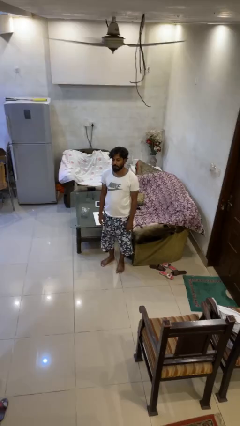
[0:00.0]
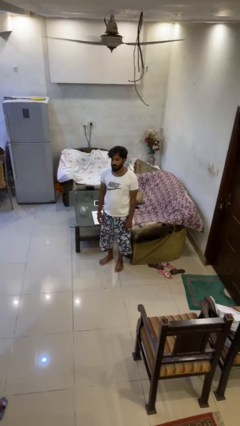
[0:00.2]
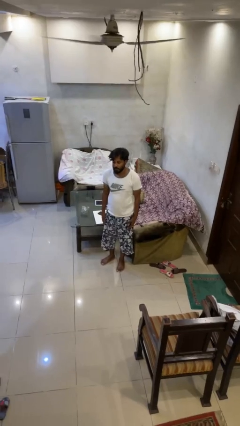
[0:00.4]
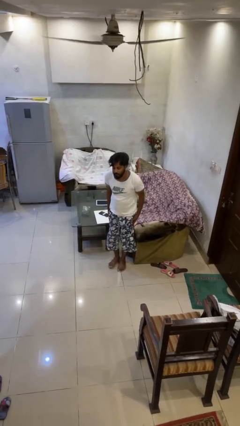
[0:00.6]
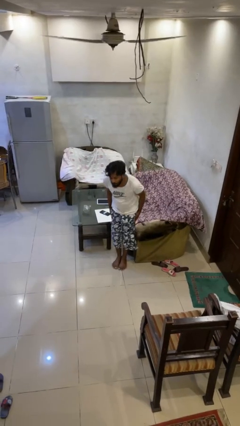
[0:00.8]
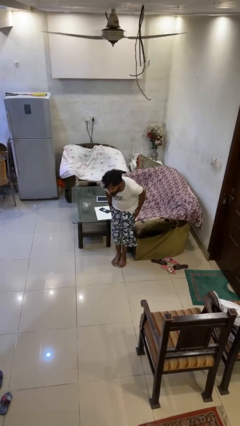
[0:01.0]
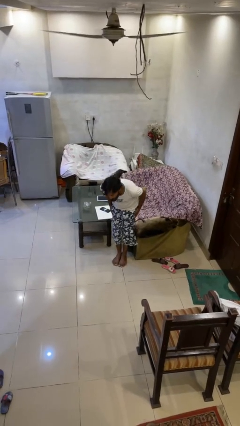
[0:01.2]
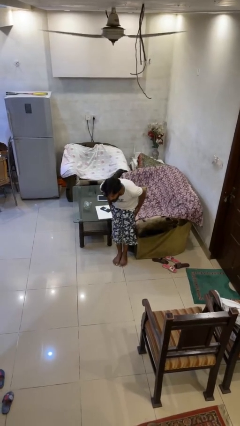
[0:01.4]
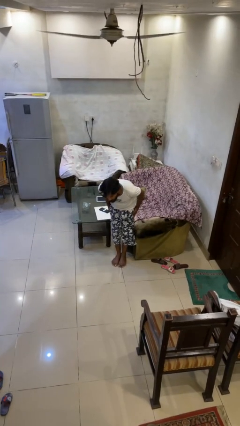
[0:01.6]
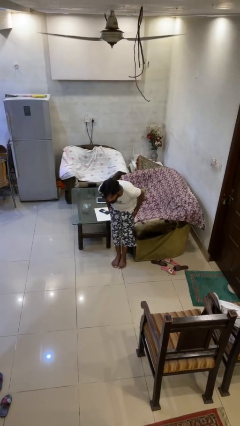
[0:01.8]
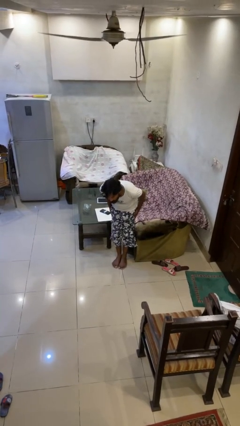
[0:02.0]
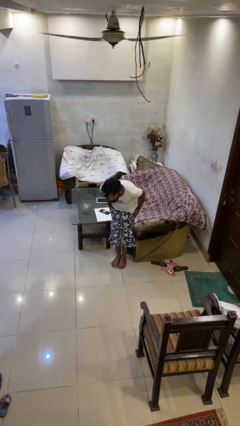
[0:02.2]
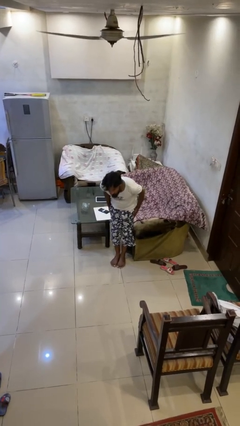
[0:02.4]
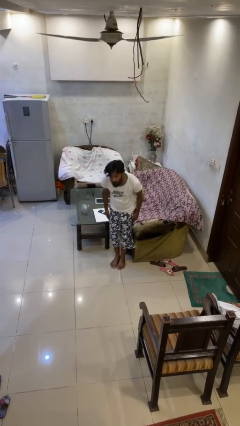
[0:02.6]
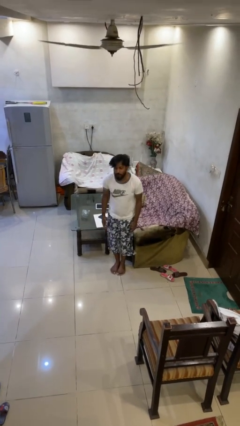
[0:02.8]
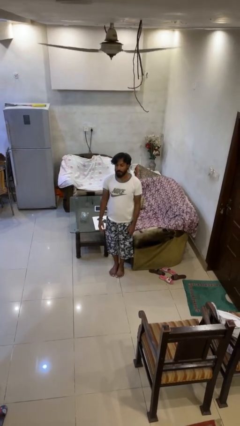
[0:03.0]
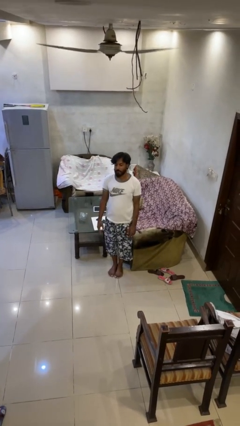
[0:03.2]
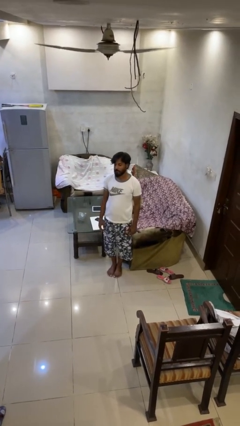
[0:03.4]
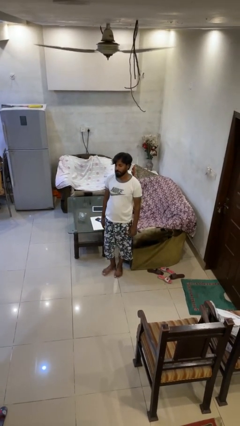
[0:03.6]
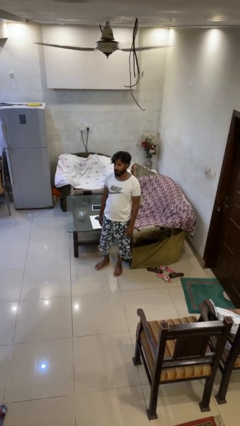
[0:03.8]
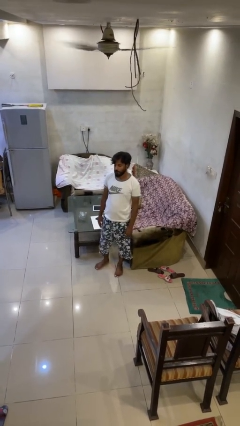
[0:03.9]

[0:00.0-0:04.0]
person bows

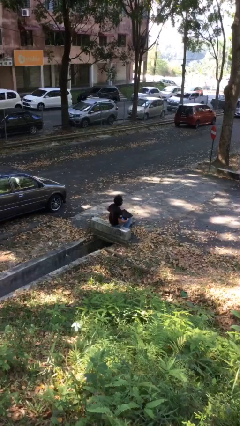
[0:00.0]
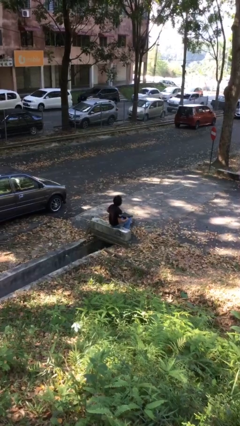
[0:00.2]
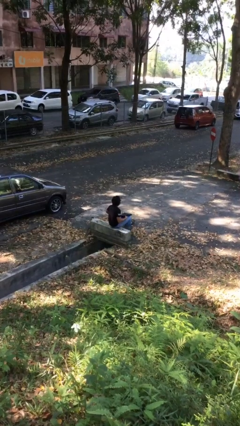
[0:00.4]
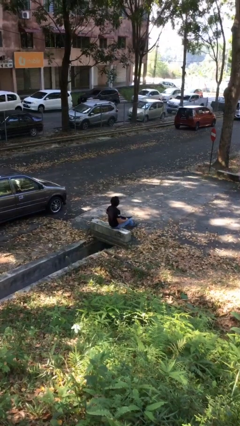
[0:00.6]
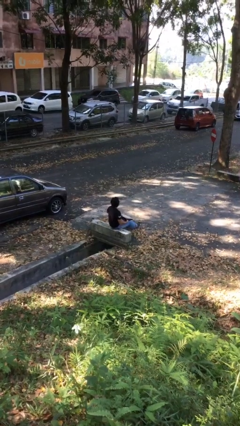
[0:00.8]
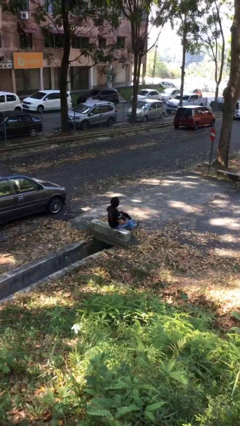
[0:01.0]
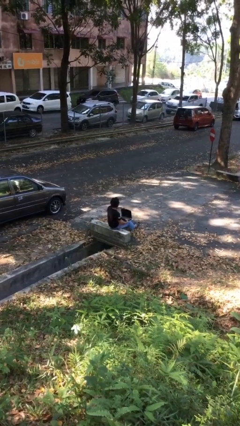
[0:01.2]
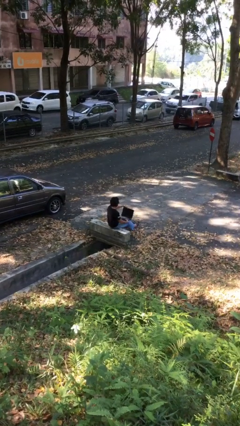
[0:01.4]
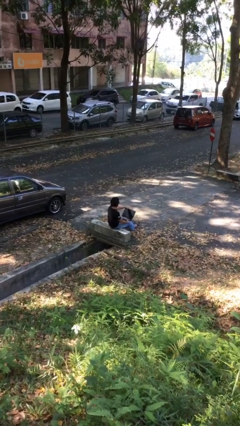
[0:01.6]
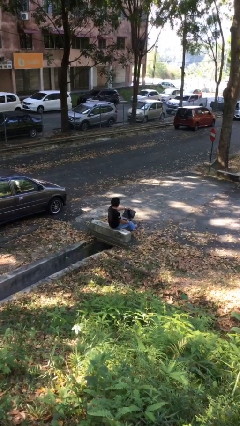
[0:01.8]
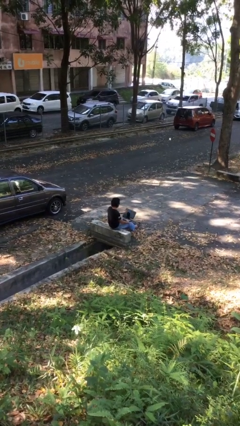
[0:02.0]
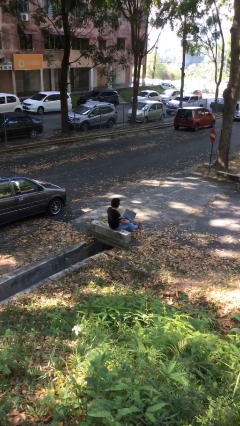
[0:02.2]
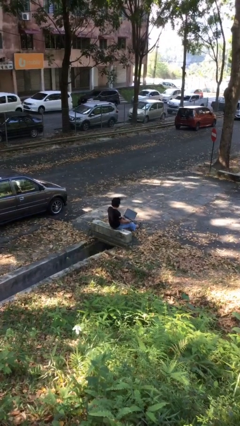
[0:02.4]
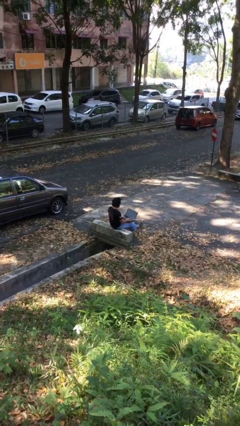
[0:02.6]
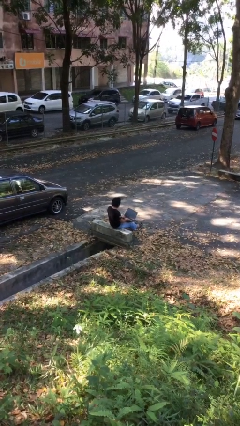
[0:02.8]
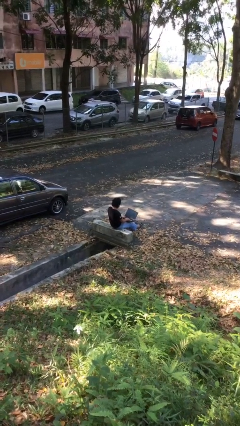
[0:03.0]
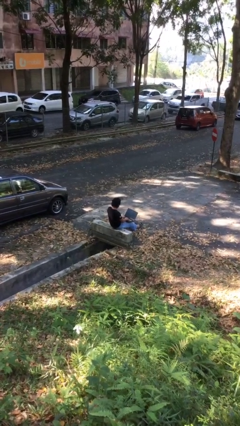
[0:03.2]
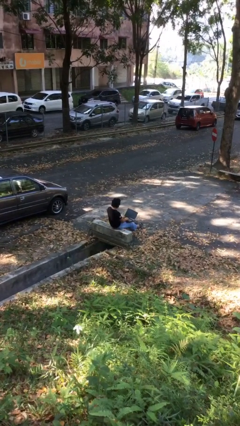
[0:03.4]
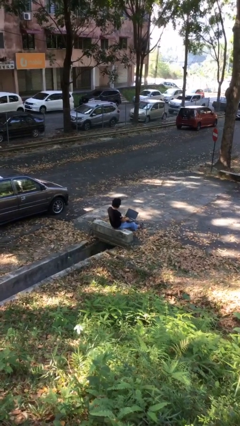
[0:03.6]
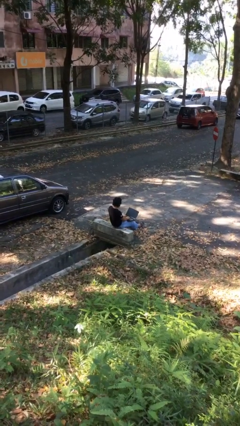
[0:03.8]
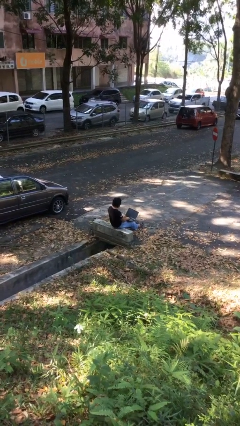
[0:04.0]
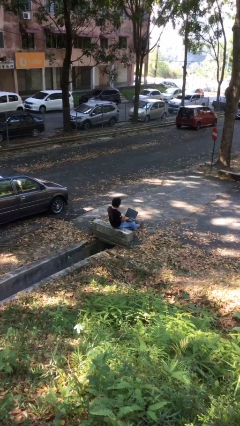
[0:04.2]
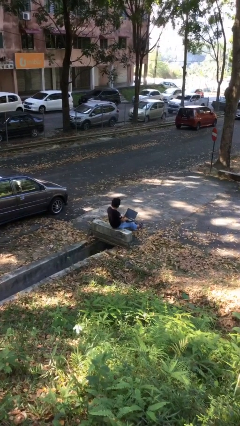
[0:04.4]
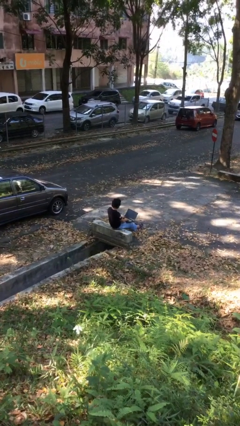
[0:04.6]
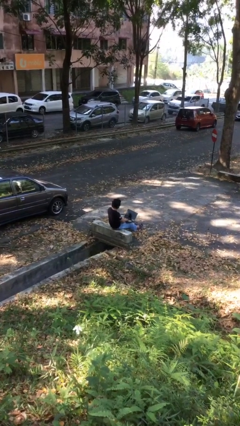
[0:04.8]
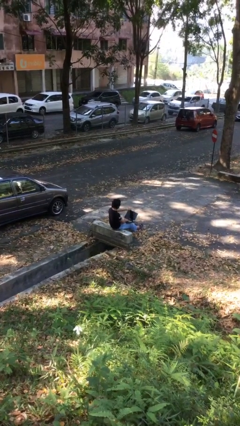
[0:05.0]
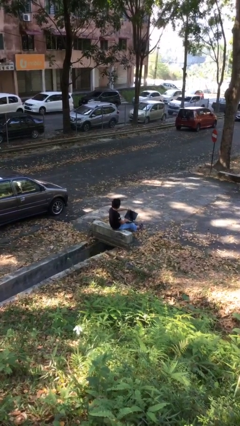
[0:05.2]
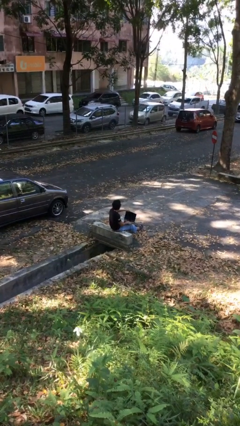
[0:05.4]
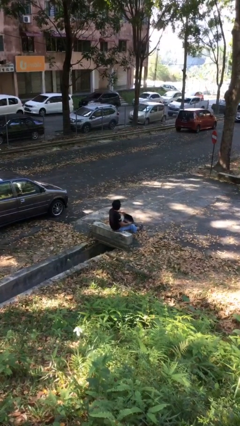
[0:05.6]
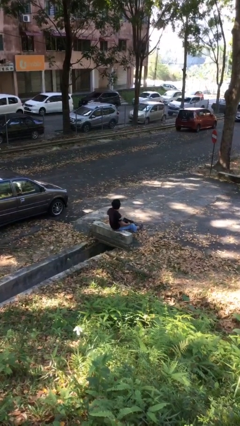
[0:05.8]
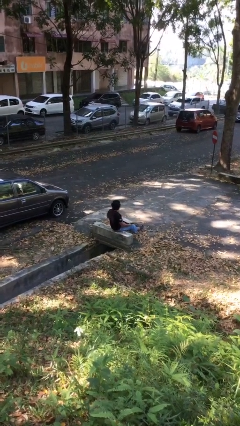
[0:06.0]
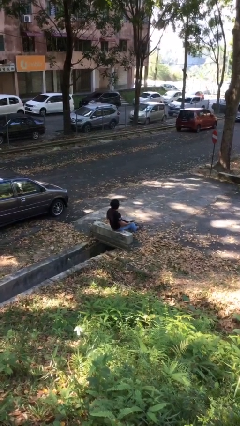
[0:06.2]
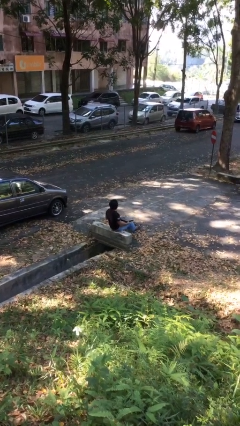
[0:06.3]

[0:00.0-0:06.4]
person interacts with laptop

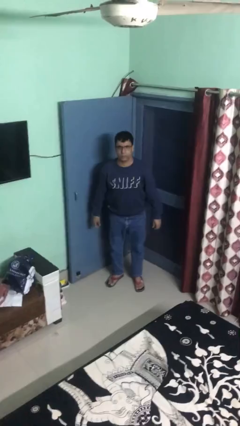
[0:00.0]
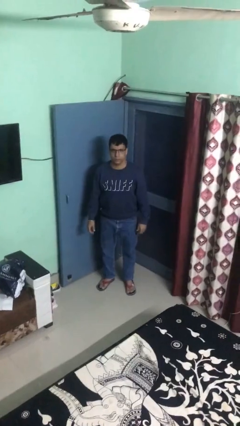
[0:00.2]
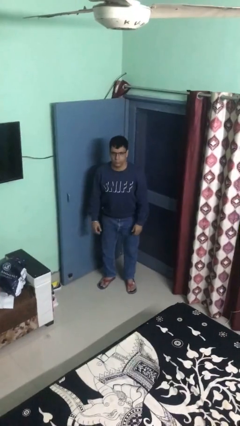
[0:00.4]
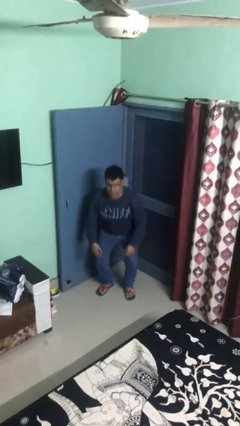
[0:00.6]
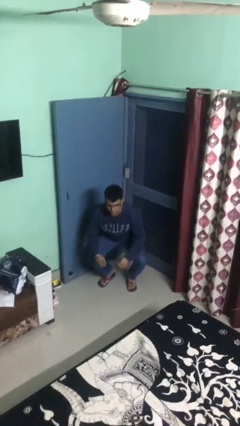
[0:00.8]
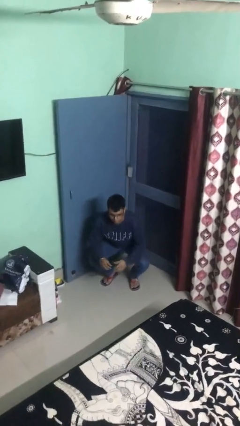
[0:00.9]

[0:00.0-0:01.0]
person sits down

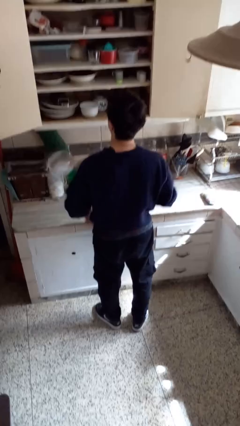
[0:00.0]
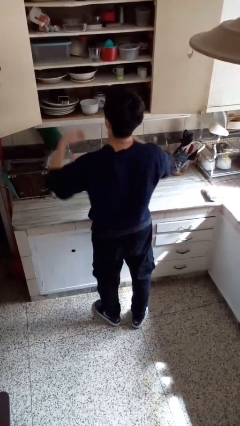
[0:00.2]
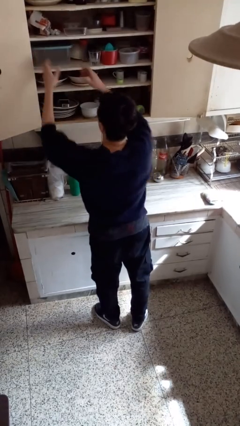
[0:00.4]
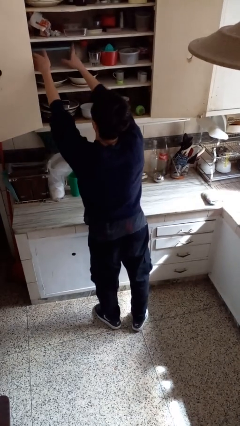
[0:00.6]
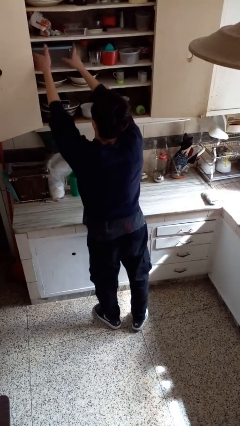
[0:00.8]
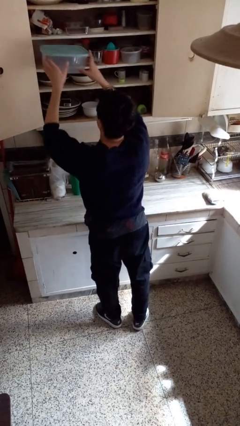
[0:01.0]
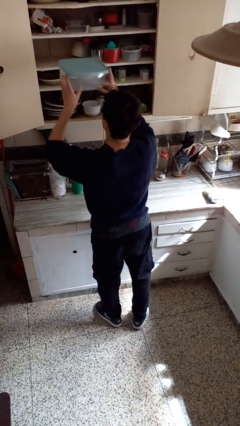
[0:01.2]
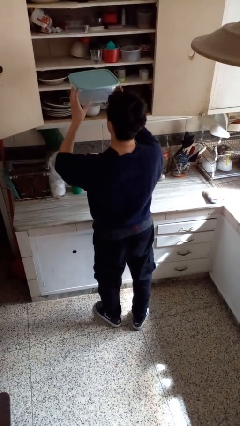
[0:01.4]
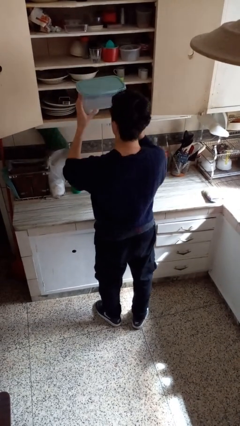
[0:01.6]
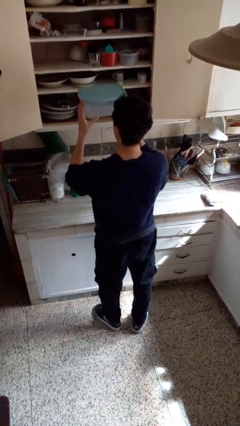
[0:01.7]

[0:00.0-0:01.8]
person picks up object from cabinet

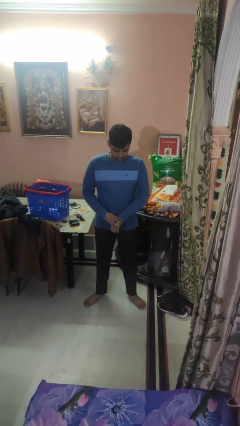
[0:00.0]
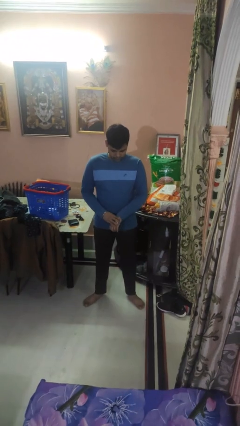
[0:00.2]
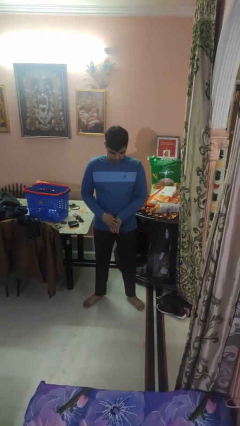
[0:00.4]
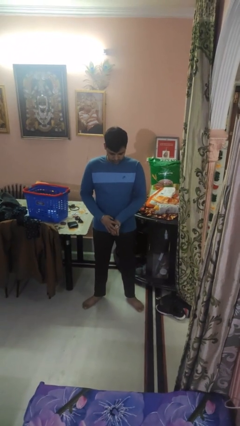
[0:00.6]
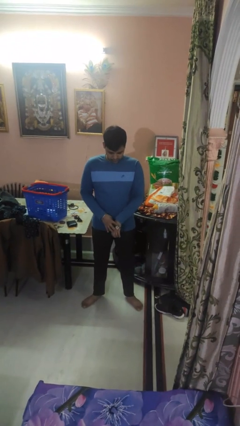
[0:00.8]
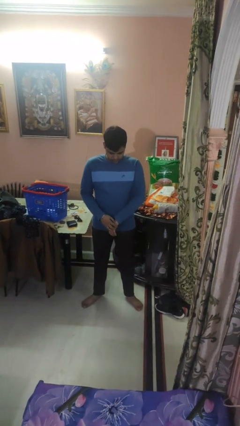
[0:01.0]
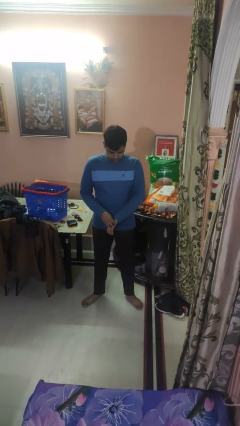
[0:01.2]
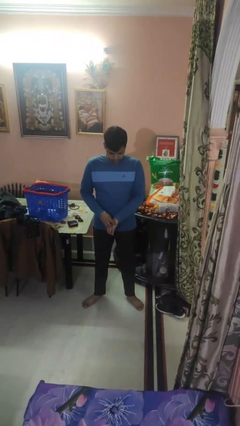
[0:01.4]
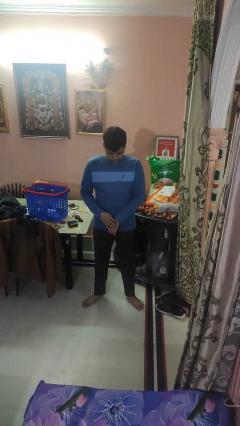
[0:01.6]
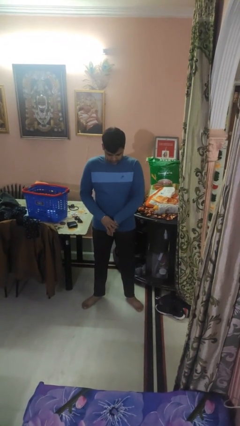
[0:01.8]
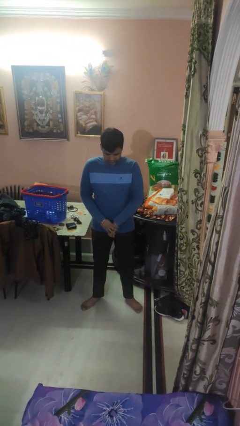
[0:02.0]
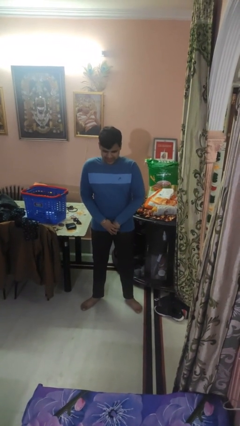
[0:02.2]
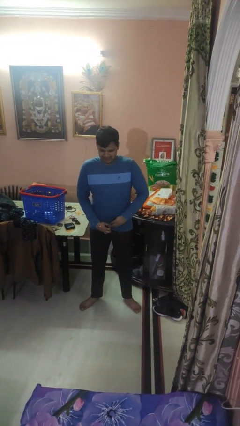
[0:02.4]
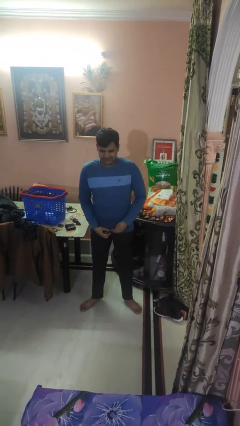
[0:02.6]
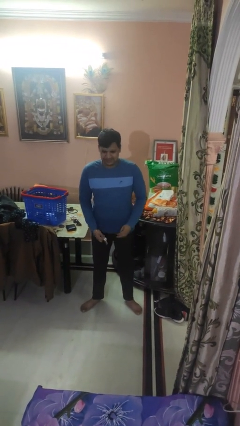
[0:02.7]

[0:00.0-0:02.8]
person takes off wristwatch

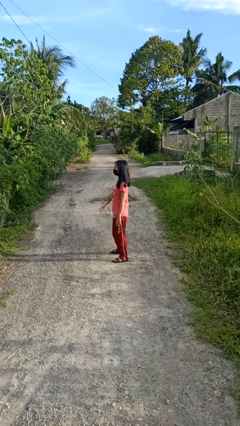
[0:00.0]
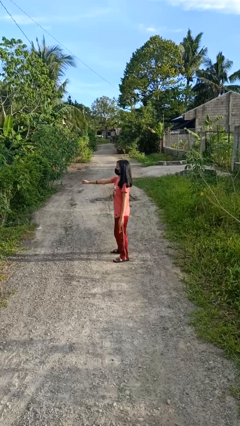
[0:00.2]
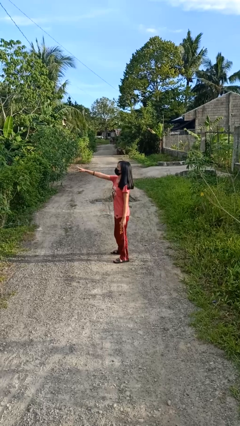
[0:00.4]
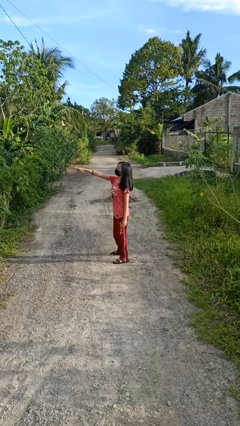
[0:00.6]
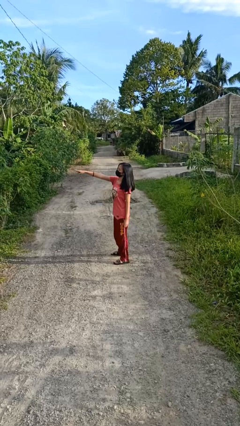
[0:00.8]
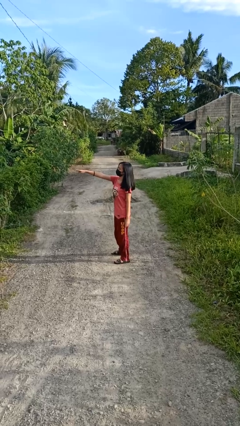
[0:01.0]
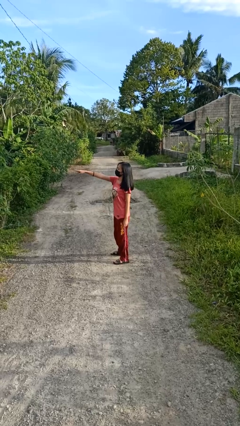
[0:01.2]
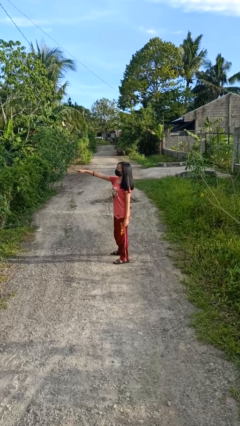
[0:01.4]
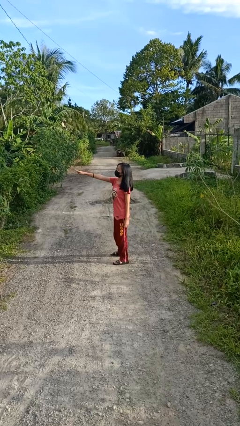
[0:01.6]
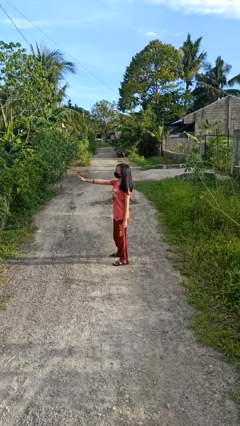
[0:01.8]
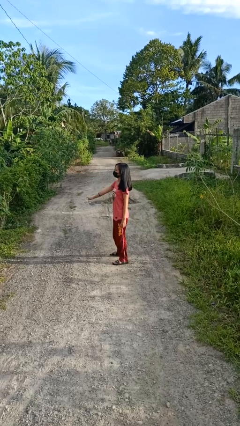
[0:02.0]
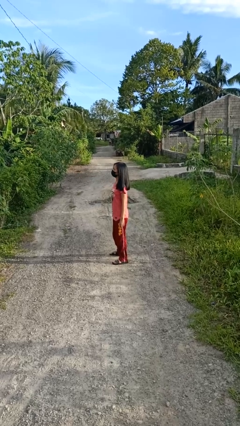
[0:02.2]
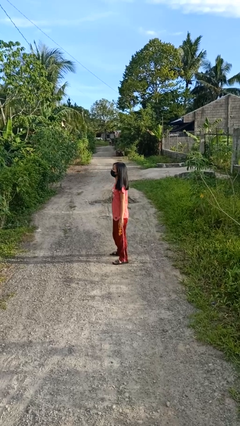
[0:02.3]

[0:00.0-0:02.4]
person points at person
